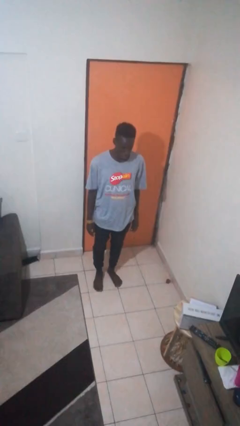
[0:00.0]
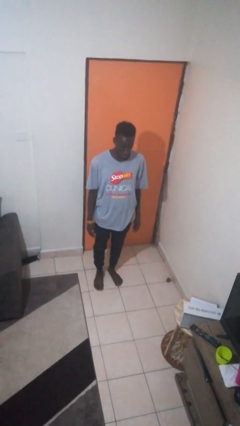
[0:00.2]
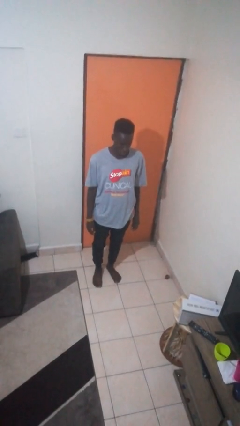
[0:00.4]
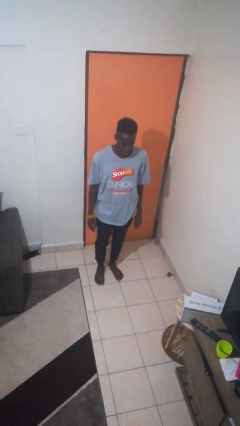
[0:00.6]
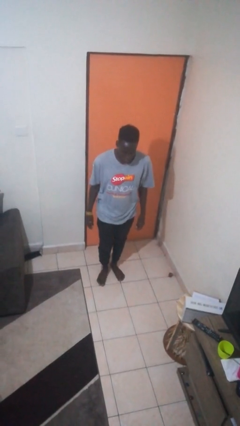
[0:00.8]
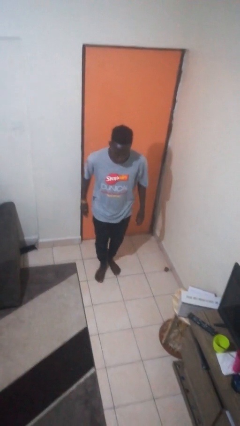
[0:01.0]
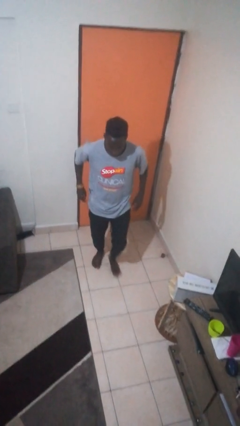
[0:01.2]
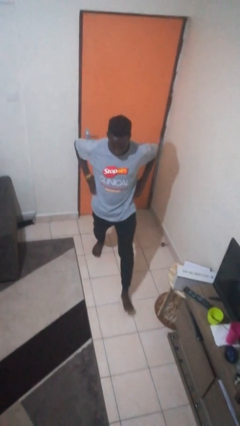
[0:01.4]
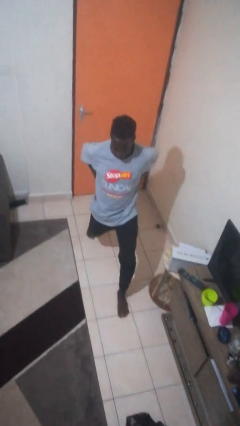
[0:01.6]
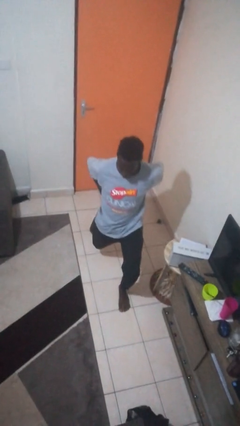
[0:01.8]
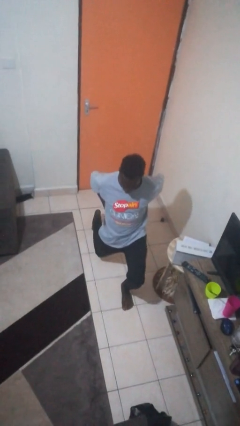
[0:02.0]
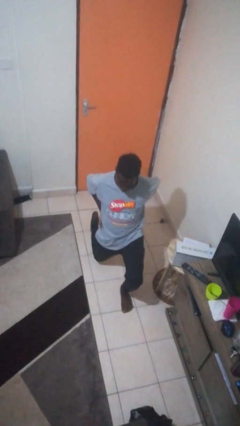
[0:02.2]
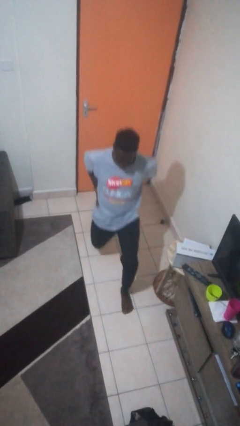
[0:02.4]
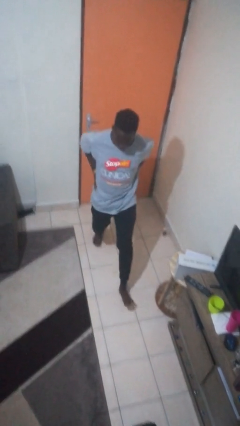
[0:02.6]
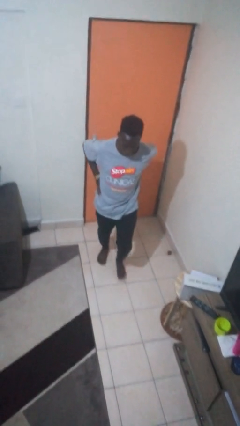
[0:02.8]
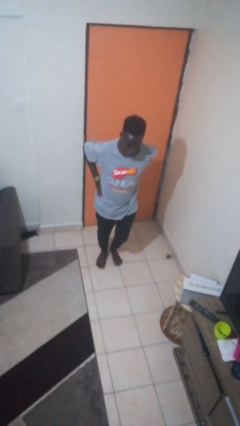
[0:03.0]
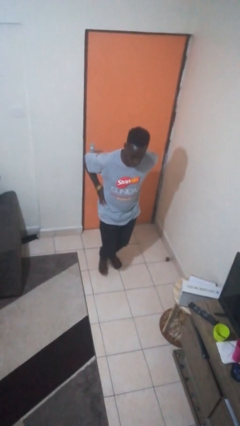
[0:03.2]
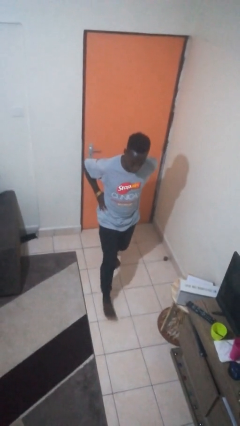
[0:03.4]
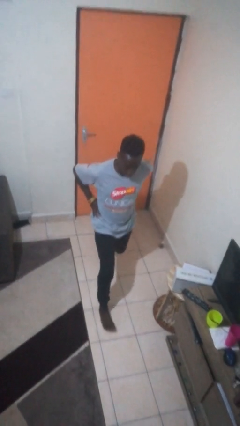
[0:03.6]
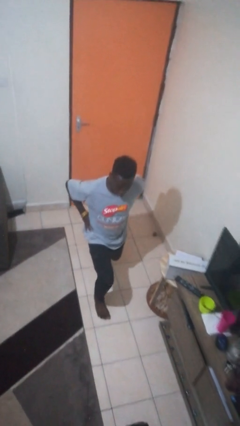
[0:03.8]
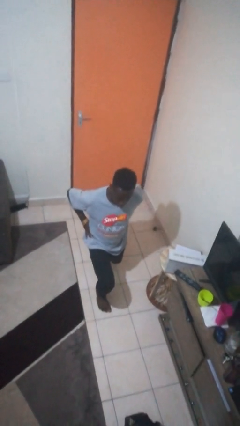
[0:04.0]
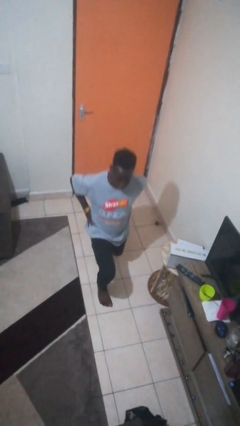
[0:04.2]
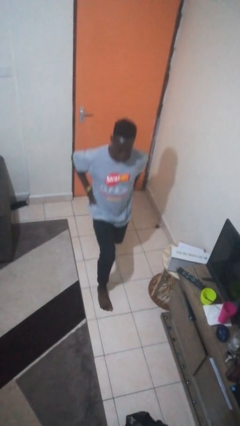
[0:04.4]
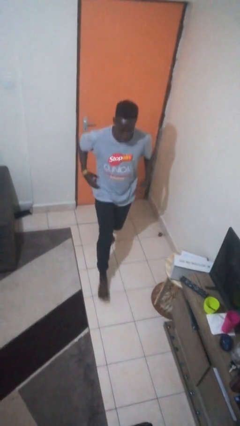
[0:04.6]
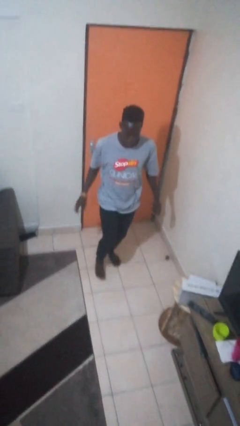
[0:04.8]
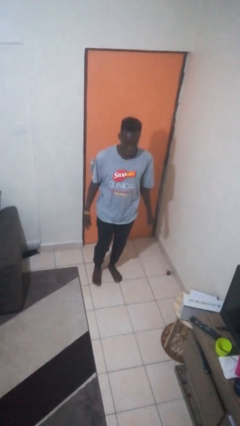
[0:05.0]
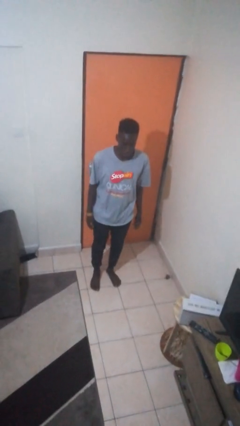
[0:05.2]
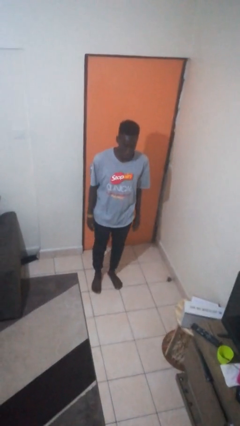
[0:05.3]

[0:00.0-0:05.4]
person exercises with lunges

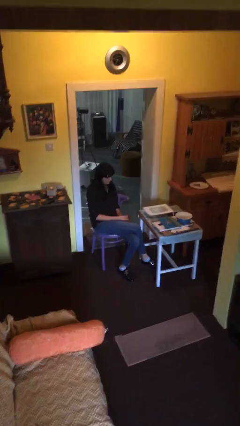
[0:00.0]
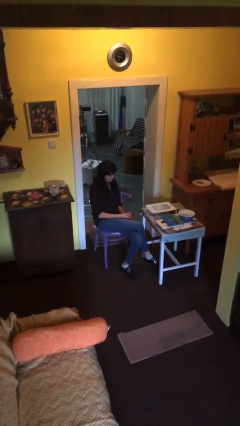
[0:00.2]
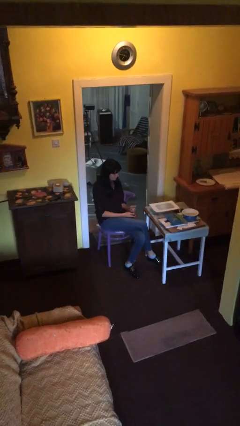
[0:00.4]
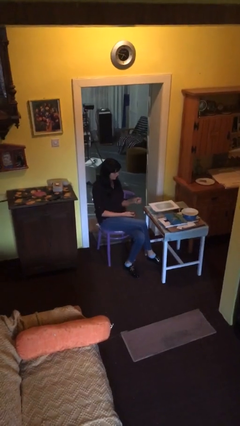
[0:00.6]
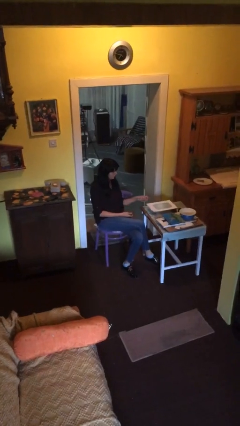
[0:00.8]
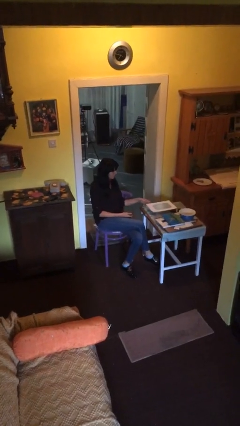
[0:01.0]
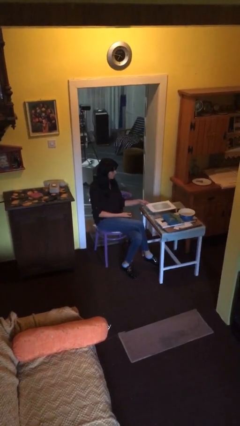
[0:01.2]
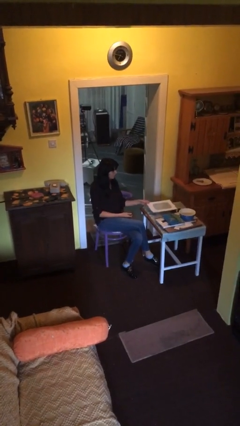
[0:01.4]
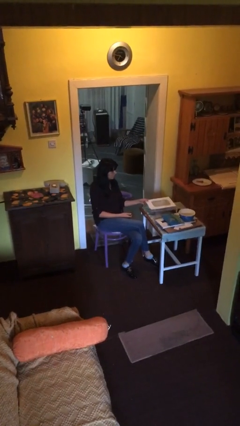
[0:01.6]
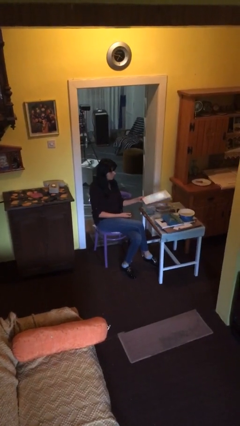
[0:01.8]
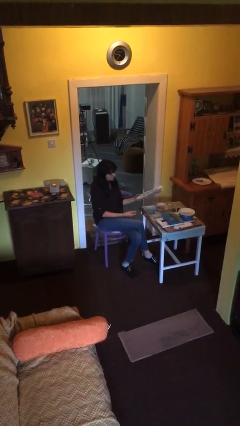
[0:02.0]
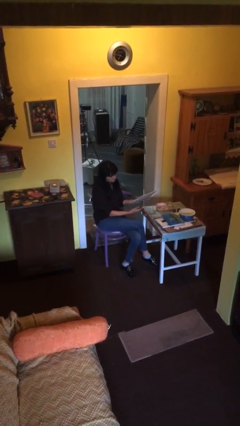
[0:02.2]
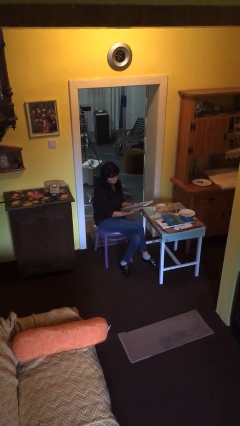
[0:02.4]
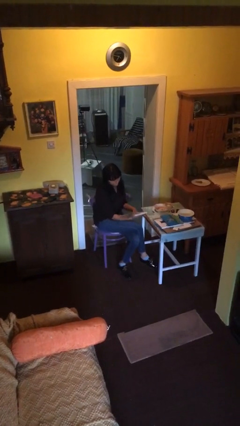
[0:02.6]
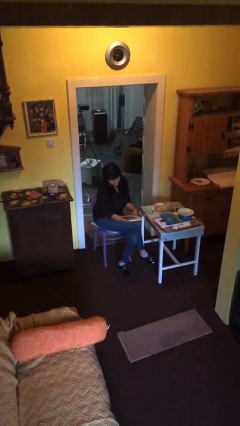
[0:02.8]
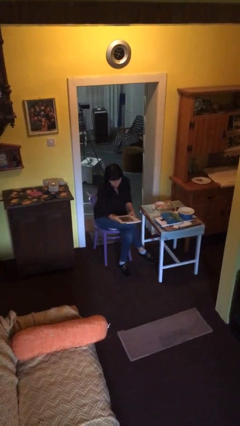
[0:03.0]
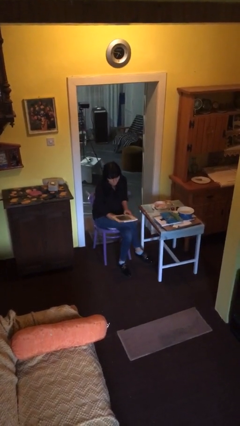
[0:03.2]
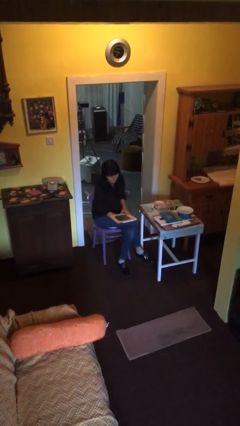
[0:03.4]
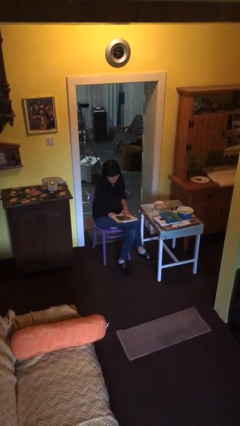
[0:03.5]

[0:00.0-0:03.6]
person picks up object from table

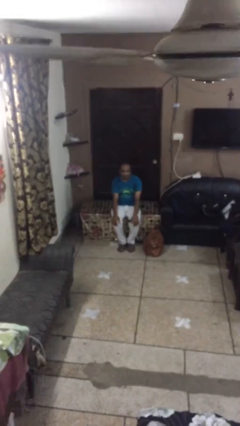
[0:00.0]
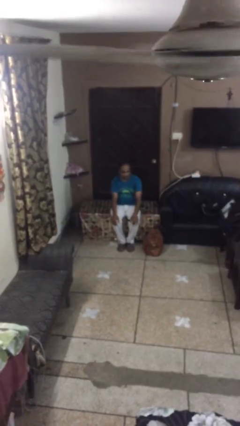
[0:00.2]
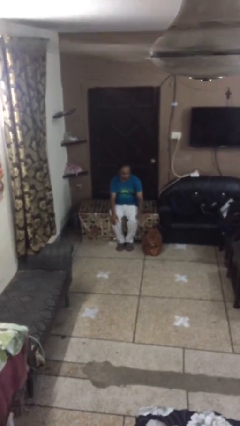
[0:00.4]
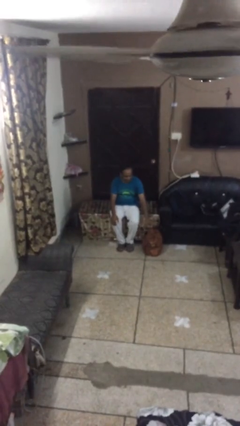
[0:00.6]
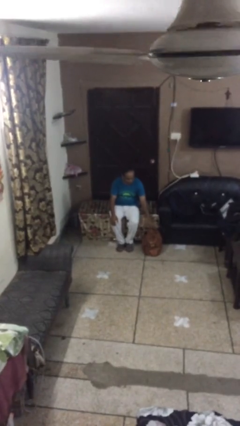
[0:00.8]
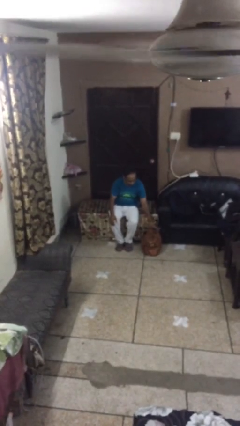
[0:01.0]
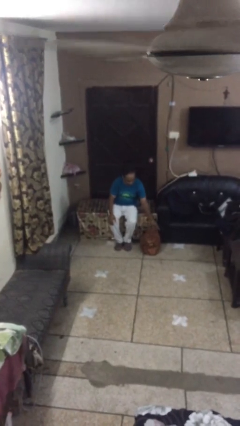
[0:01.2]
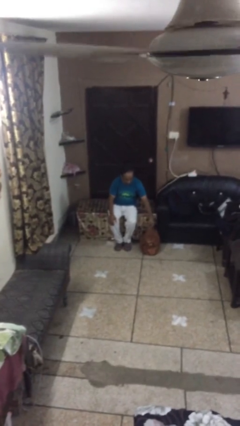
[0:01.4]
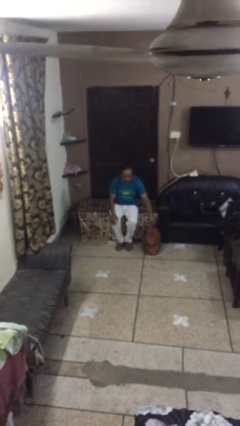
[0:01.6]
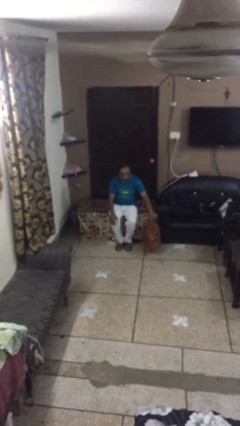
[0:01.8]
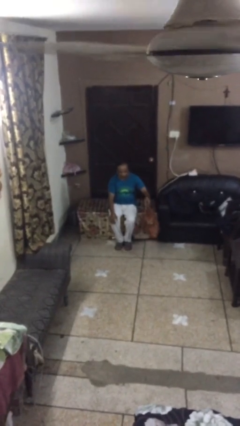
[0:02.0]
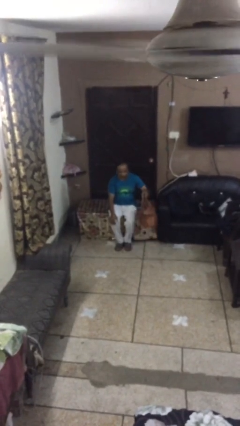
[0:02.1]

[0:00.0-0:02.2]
person picks up object from floor

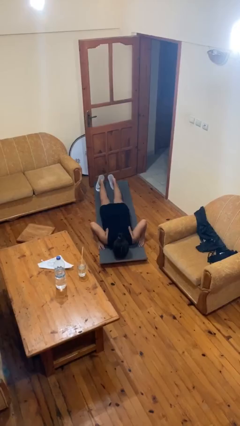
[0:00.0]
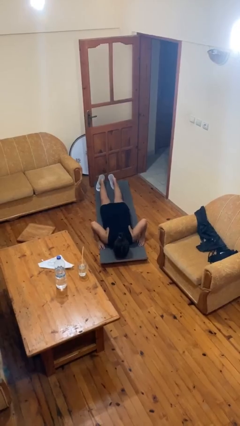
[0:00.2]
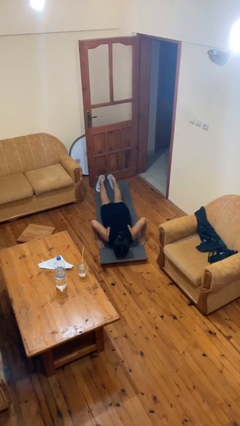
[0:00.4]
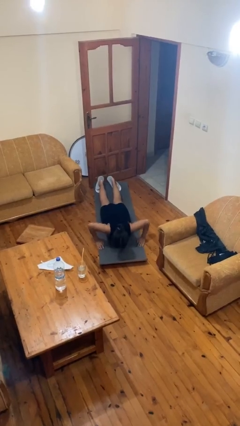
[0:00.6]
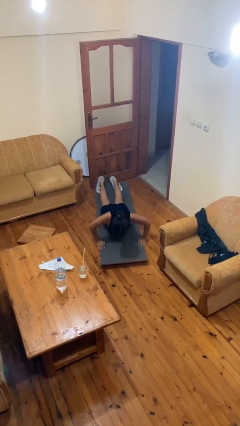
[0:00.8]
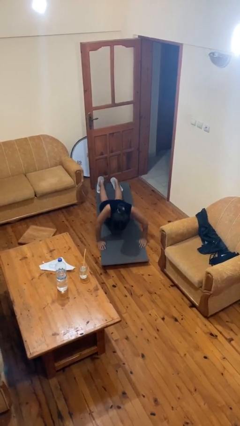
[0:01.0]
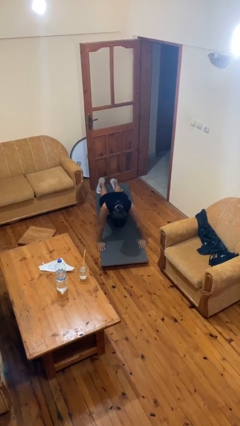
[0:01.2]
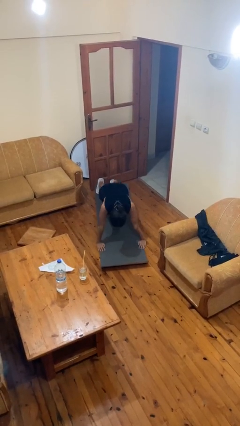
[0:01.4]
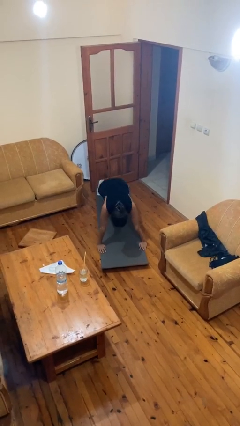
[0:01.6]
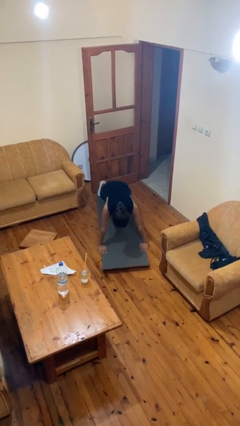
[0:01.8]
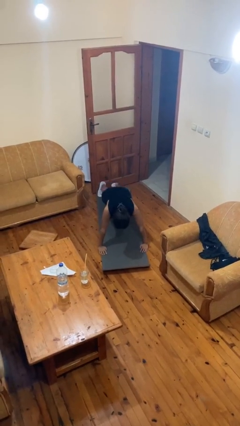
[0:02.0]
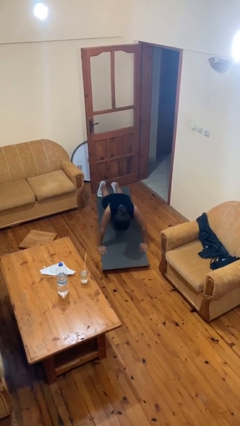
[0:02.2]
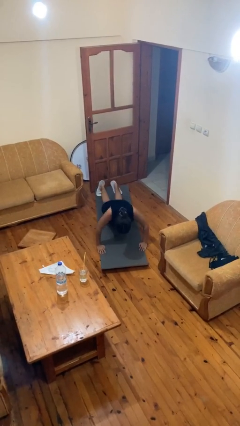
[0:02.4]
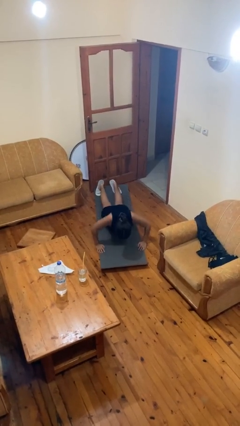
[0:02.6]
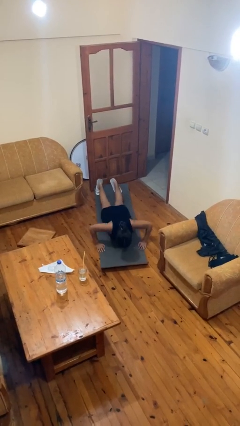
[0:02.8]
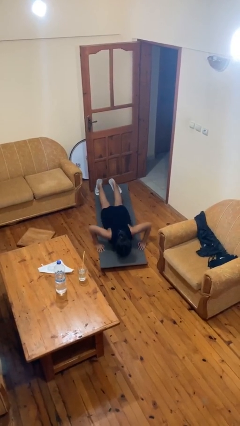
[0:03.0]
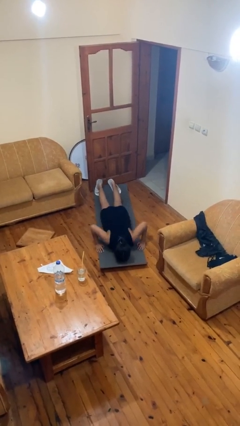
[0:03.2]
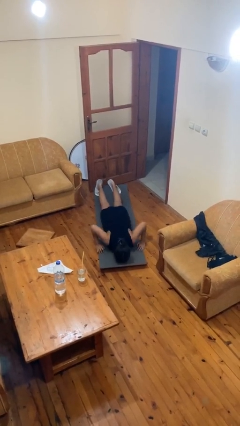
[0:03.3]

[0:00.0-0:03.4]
person exercises with pushup

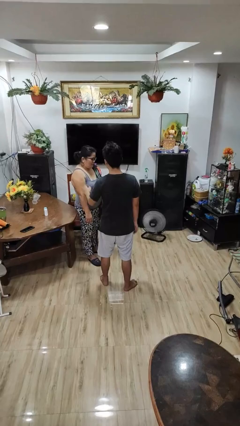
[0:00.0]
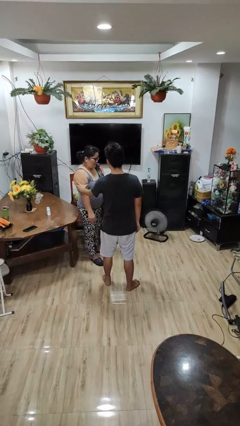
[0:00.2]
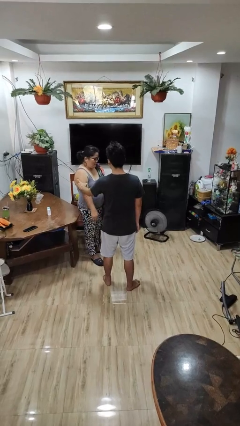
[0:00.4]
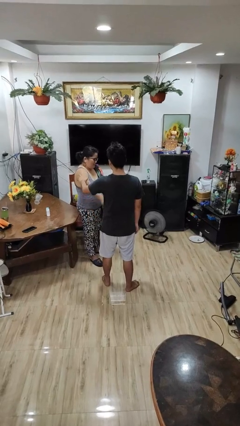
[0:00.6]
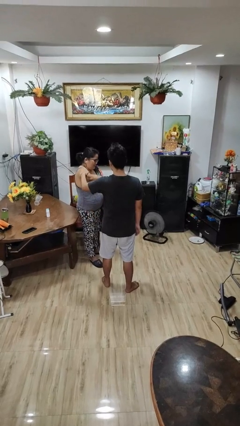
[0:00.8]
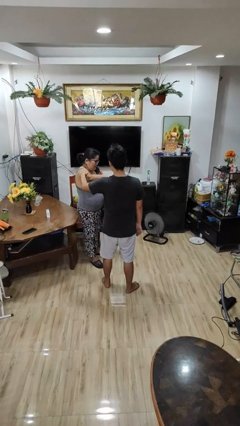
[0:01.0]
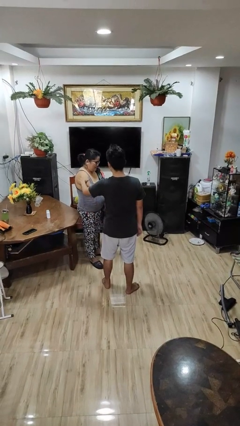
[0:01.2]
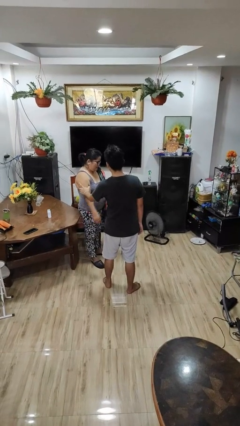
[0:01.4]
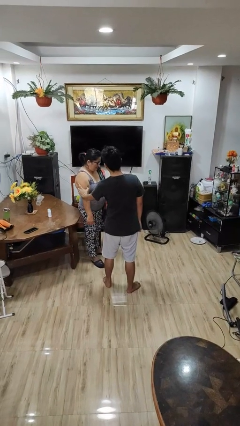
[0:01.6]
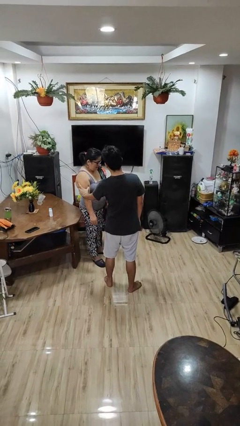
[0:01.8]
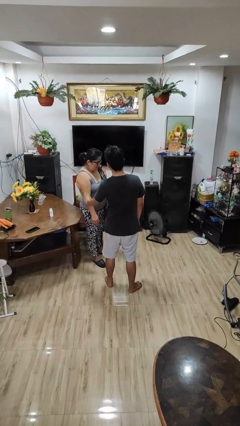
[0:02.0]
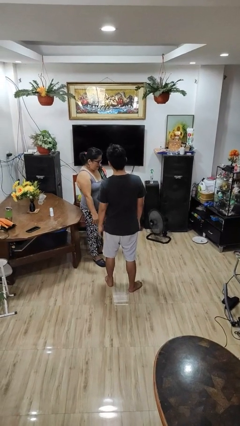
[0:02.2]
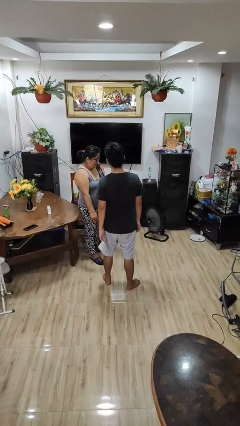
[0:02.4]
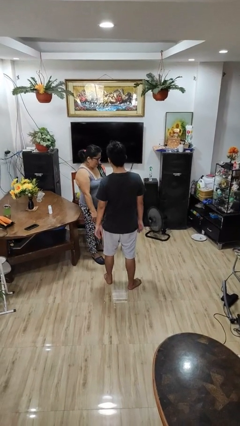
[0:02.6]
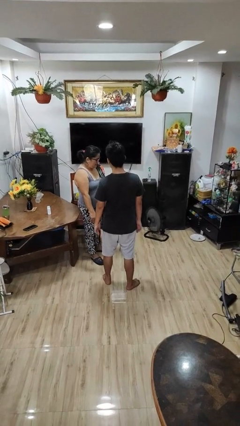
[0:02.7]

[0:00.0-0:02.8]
person grabs person by bicep
